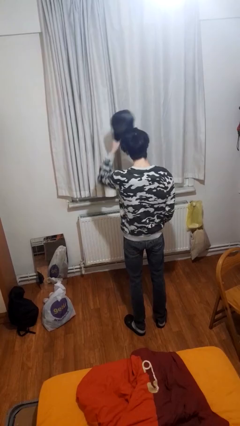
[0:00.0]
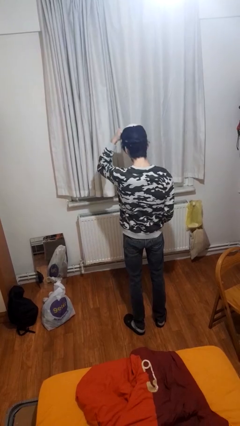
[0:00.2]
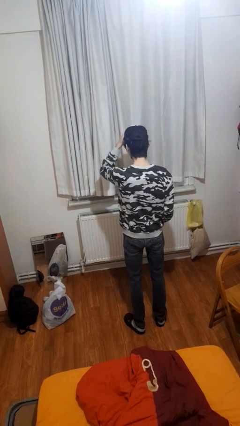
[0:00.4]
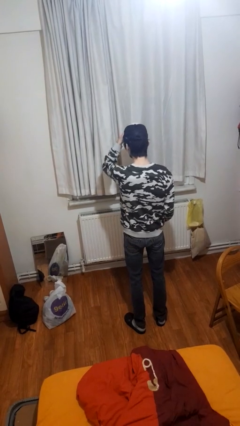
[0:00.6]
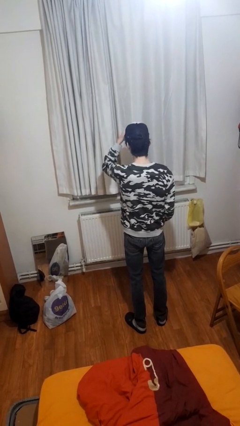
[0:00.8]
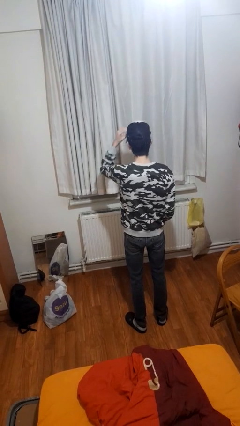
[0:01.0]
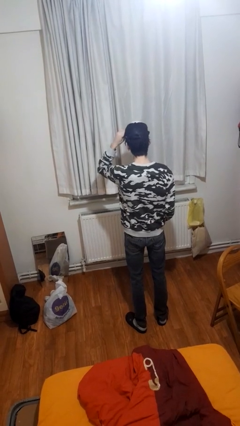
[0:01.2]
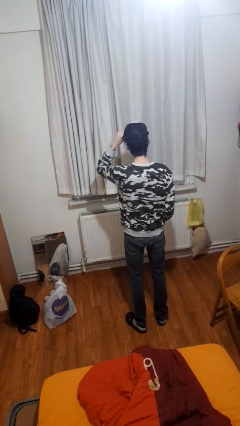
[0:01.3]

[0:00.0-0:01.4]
person puts on hat

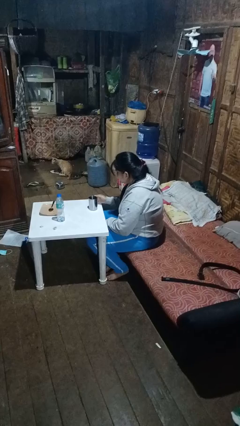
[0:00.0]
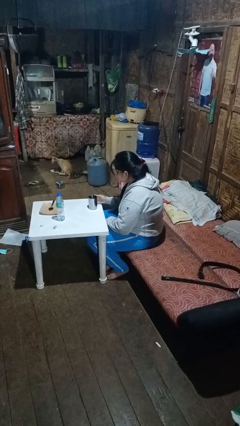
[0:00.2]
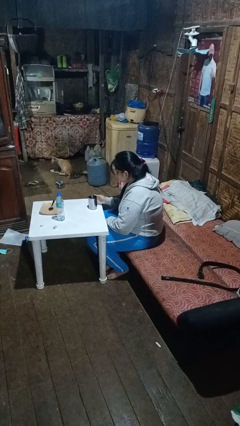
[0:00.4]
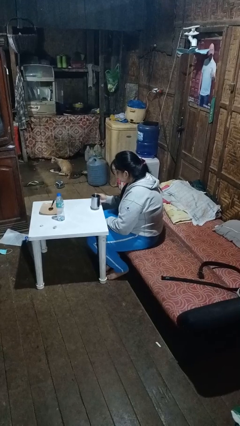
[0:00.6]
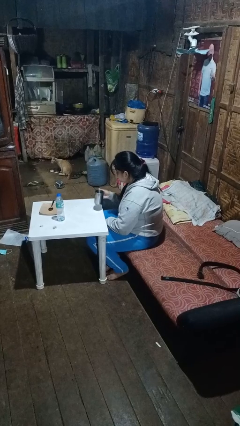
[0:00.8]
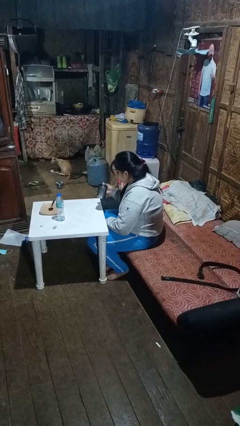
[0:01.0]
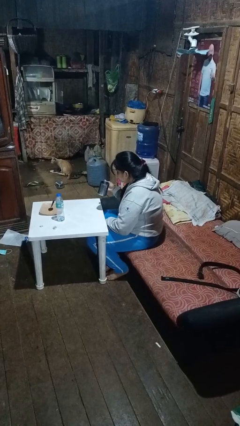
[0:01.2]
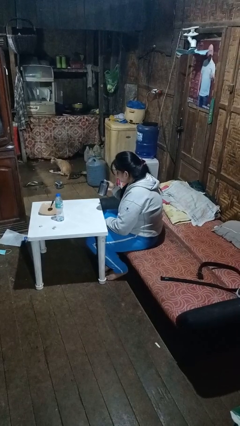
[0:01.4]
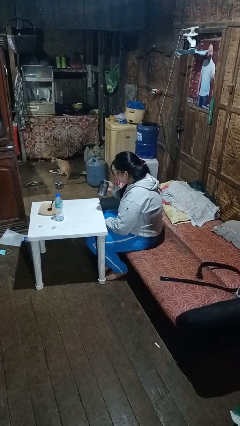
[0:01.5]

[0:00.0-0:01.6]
person picks up object from table

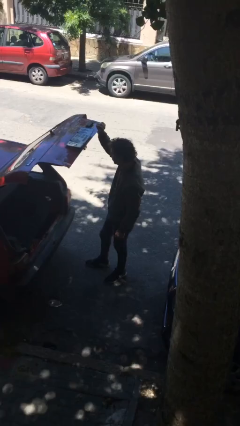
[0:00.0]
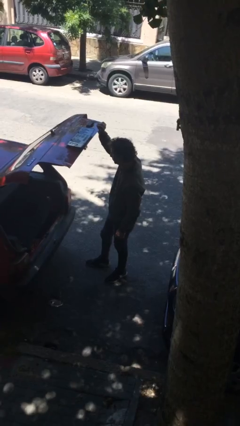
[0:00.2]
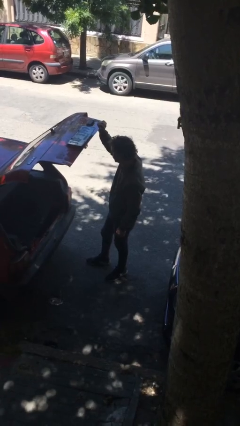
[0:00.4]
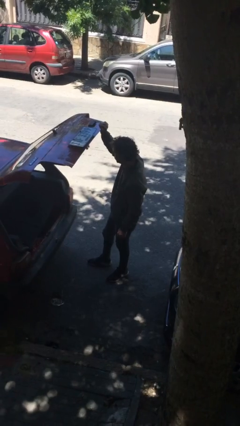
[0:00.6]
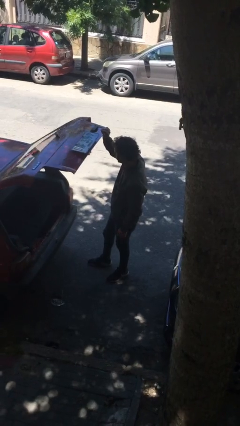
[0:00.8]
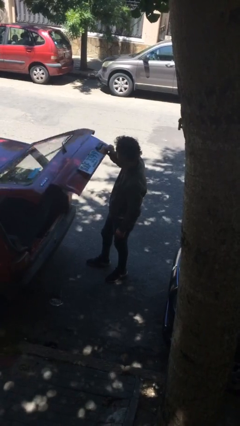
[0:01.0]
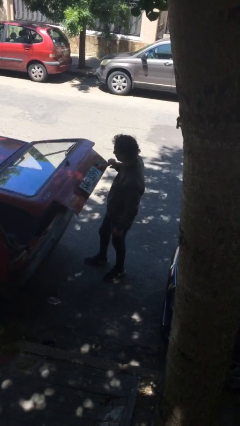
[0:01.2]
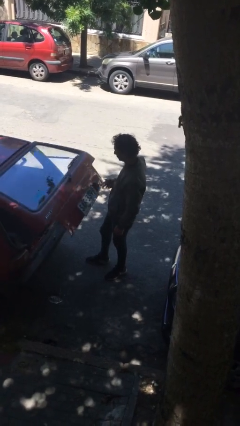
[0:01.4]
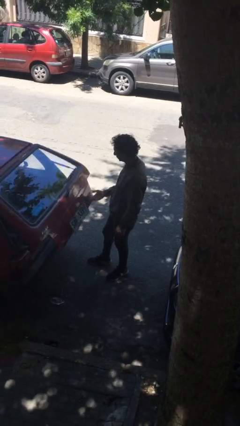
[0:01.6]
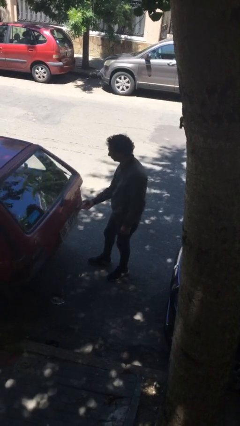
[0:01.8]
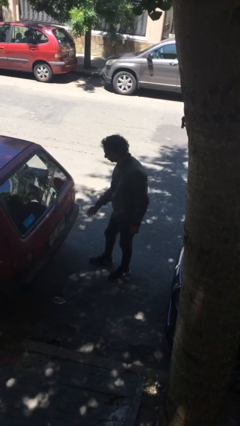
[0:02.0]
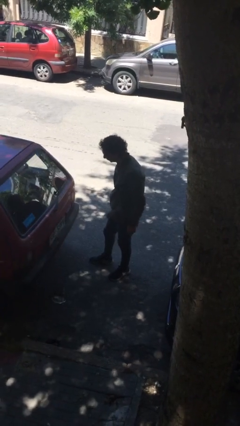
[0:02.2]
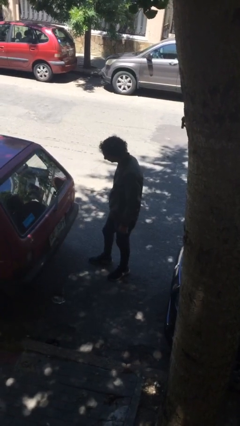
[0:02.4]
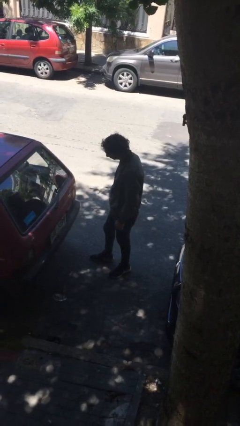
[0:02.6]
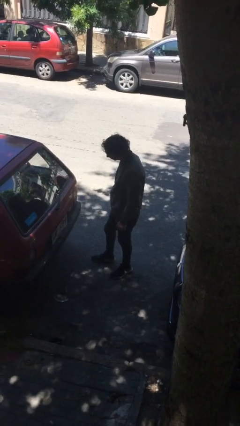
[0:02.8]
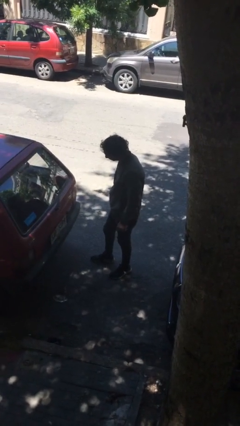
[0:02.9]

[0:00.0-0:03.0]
person closes car trunk

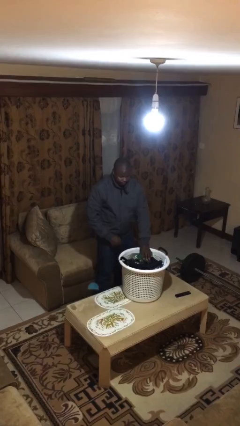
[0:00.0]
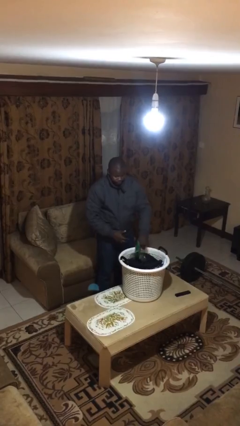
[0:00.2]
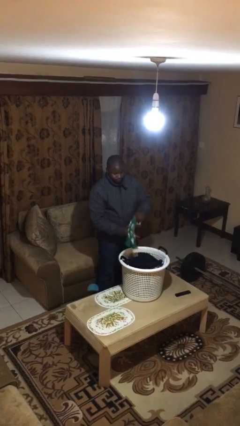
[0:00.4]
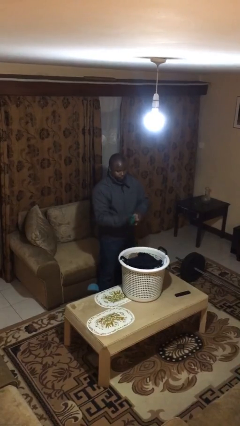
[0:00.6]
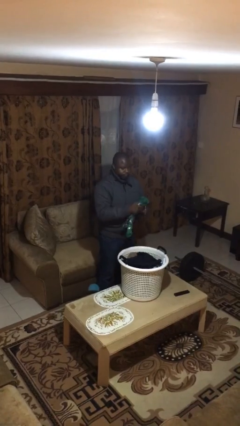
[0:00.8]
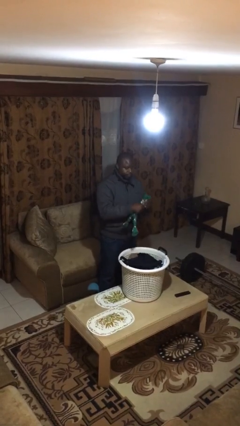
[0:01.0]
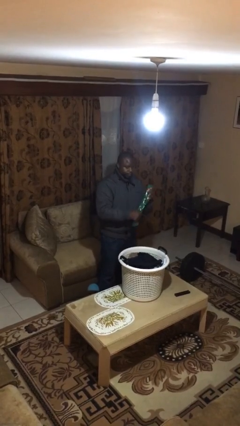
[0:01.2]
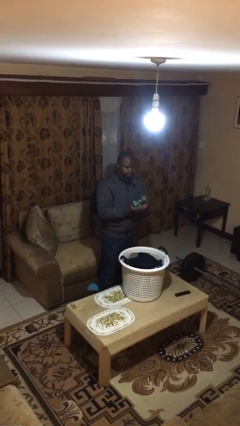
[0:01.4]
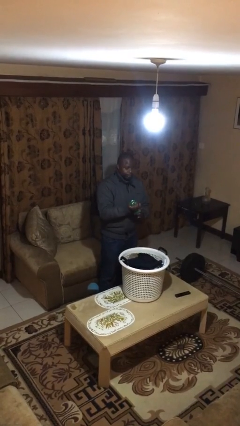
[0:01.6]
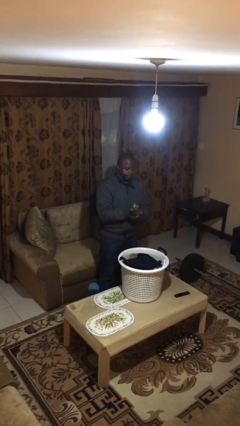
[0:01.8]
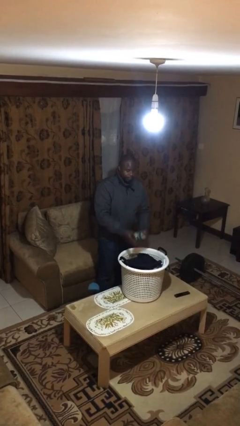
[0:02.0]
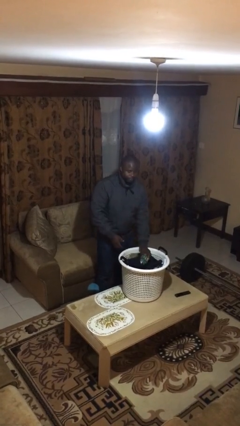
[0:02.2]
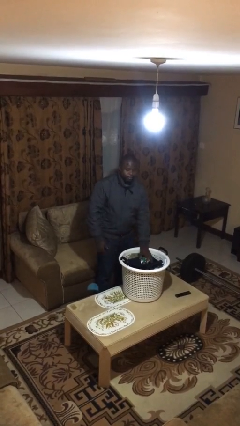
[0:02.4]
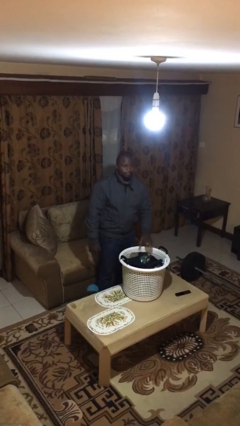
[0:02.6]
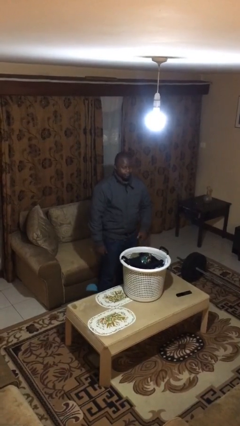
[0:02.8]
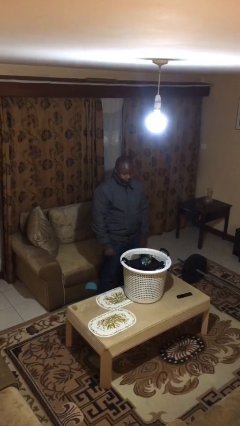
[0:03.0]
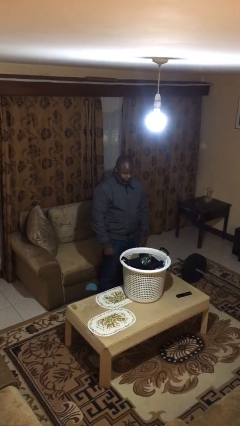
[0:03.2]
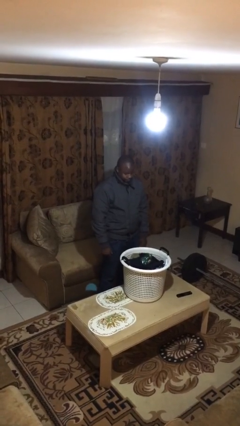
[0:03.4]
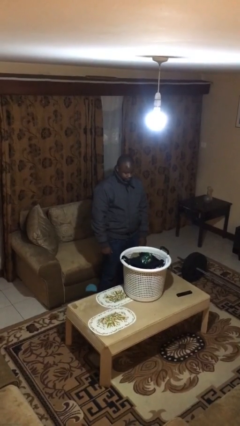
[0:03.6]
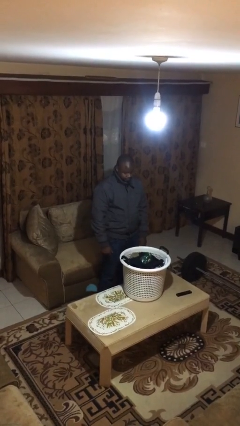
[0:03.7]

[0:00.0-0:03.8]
person folds socks

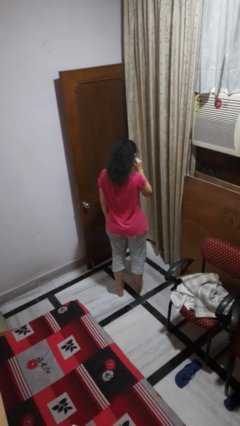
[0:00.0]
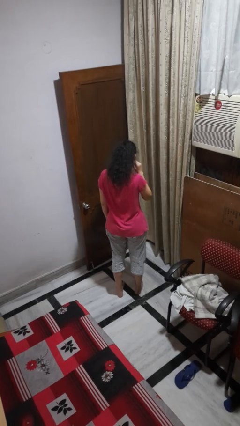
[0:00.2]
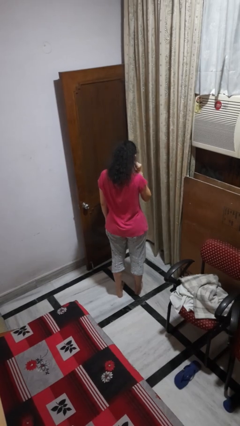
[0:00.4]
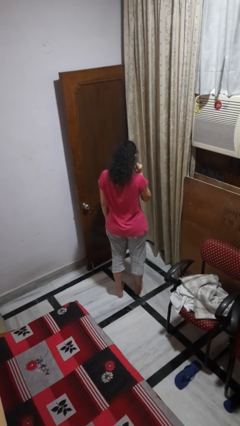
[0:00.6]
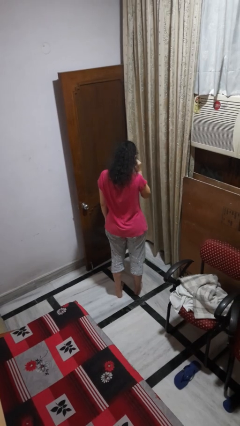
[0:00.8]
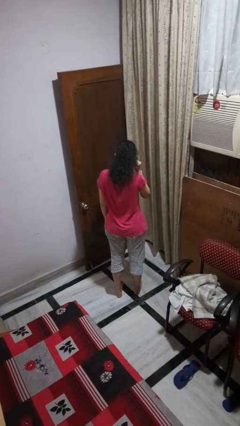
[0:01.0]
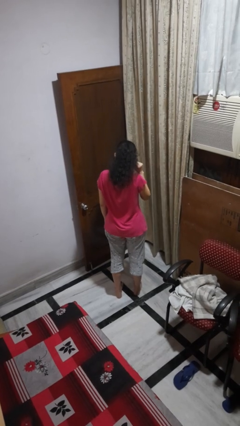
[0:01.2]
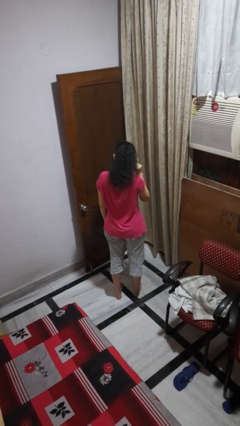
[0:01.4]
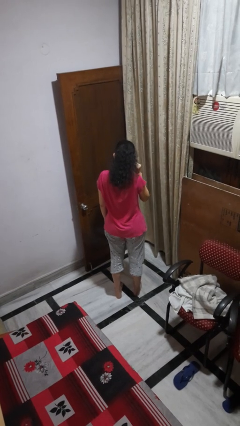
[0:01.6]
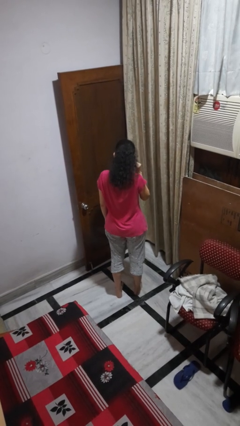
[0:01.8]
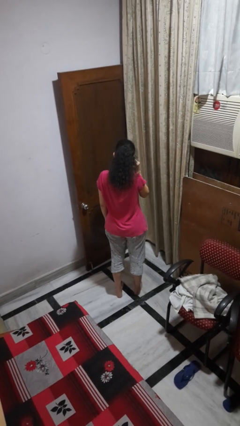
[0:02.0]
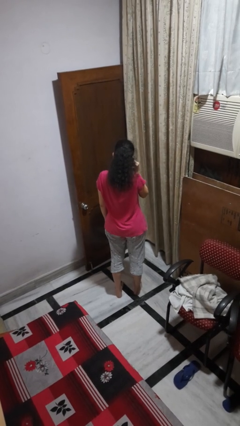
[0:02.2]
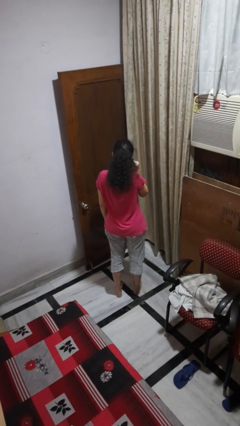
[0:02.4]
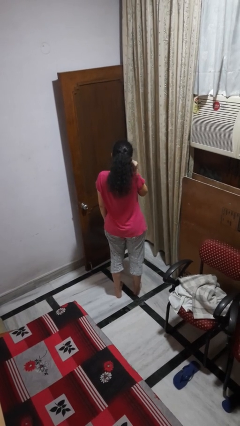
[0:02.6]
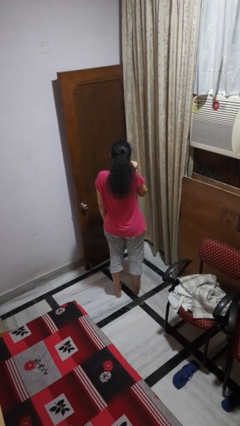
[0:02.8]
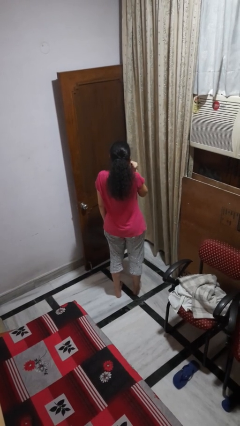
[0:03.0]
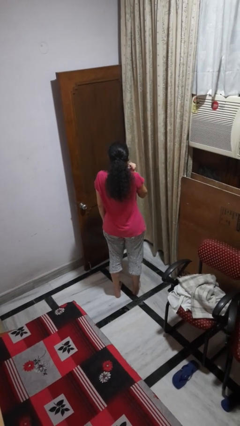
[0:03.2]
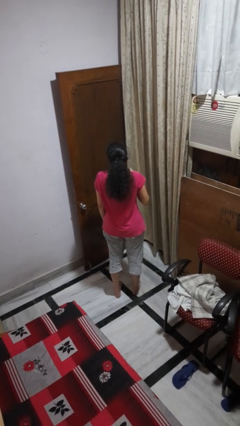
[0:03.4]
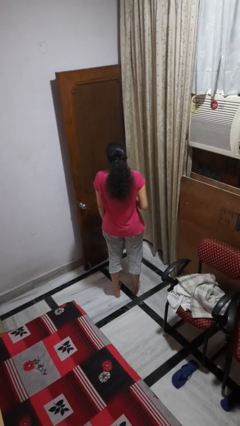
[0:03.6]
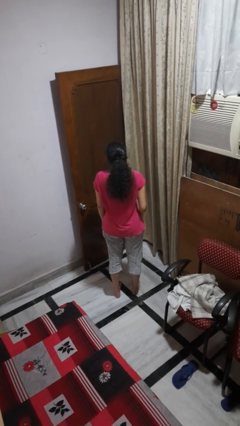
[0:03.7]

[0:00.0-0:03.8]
person touches earlobe

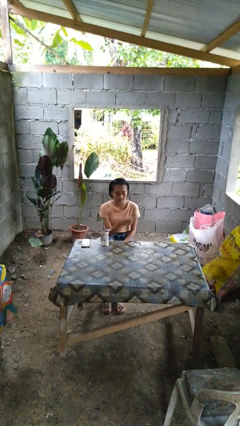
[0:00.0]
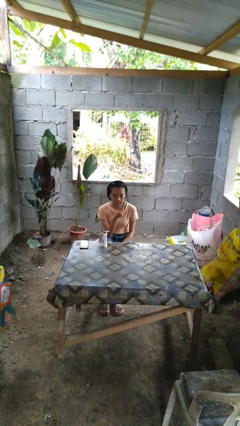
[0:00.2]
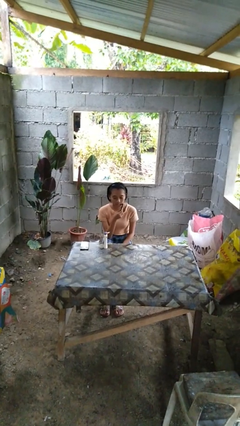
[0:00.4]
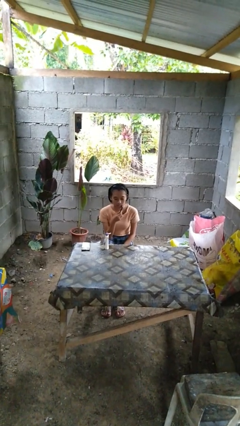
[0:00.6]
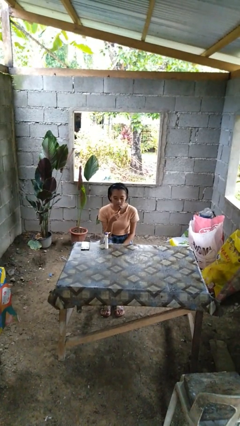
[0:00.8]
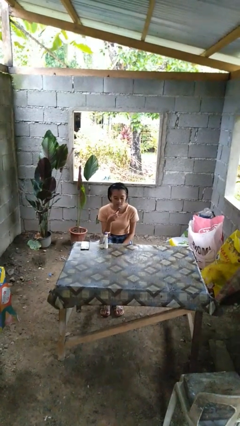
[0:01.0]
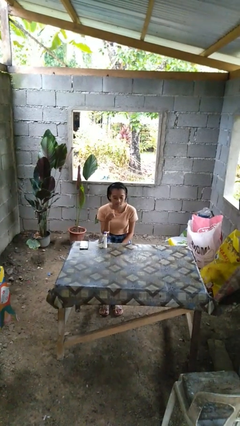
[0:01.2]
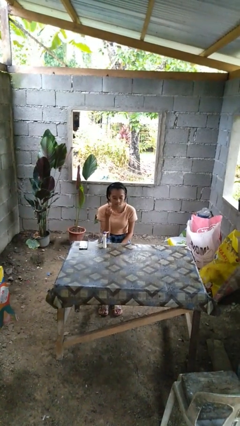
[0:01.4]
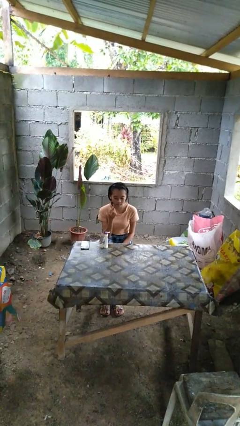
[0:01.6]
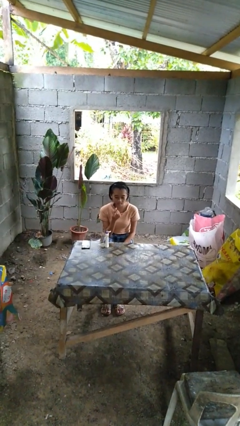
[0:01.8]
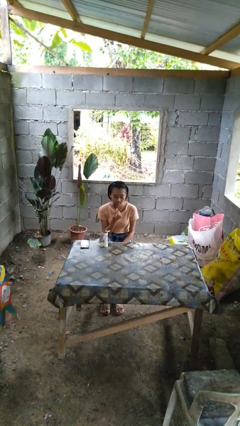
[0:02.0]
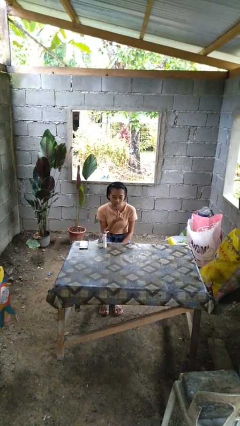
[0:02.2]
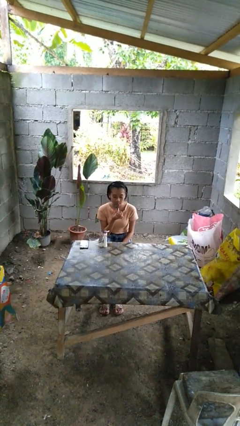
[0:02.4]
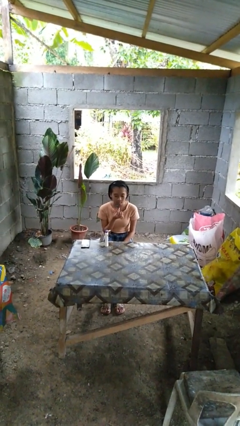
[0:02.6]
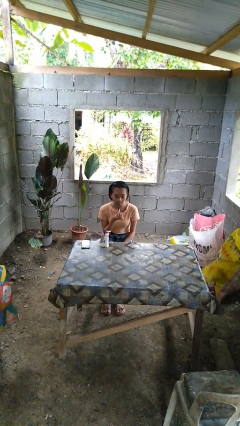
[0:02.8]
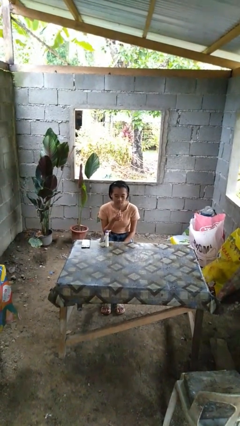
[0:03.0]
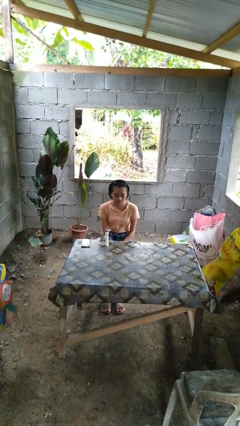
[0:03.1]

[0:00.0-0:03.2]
person shaves face

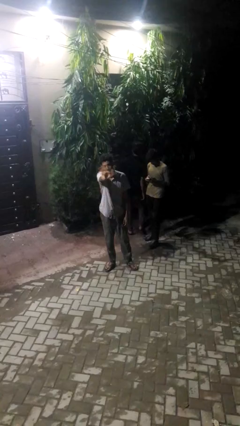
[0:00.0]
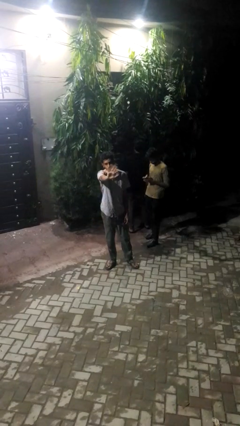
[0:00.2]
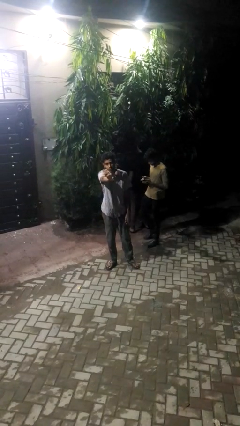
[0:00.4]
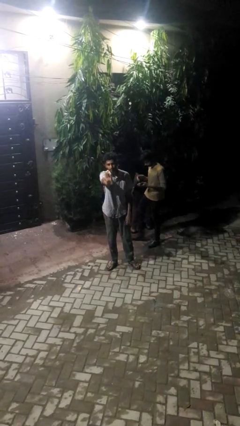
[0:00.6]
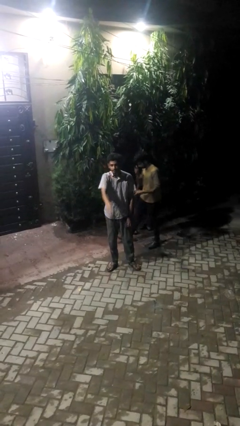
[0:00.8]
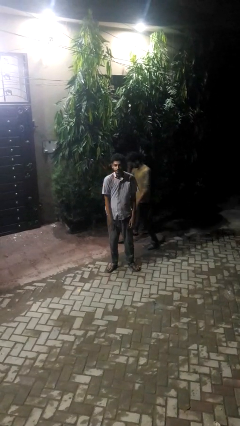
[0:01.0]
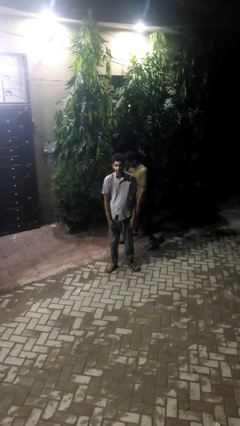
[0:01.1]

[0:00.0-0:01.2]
person waves at person
